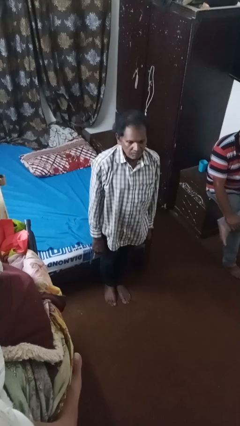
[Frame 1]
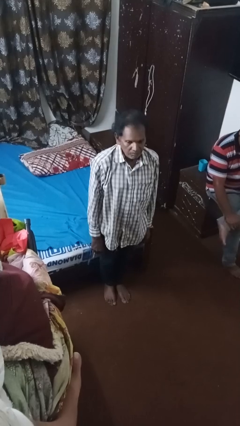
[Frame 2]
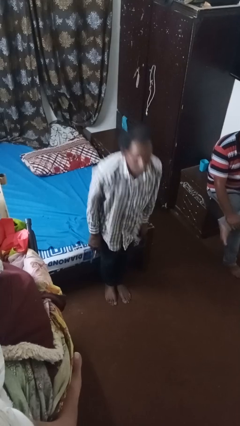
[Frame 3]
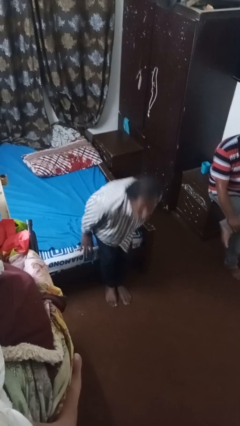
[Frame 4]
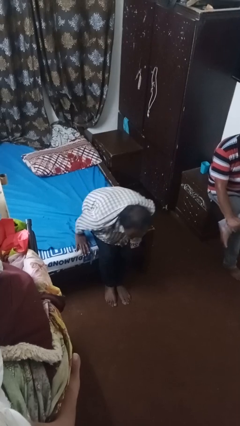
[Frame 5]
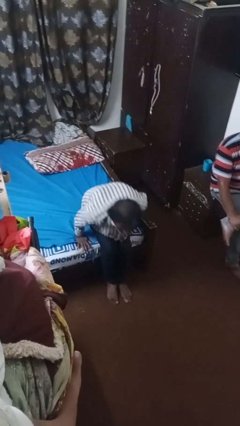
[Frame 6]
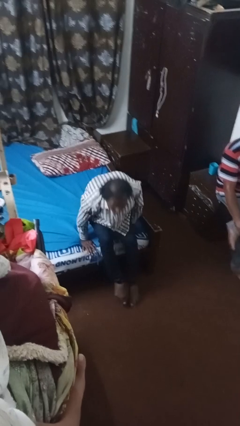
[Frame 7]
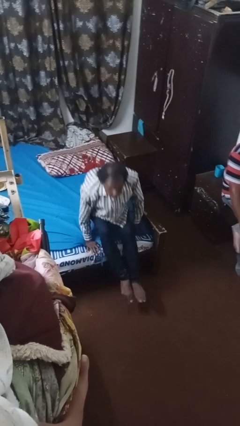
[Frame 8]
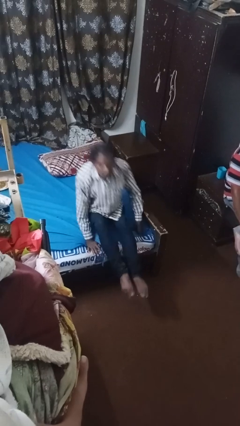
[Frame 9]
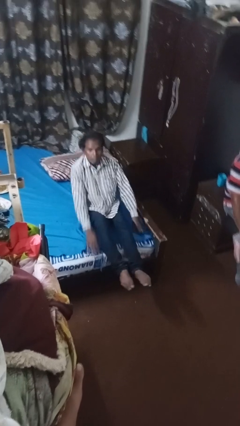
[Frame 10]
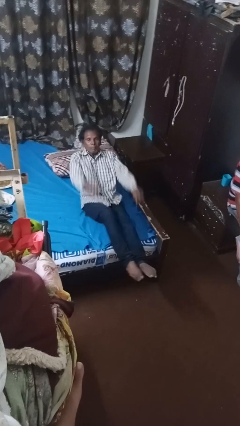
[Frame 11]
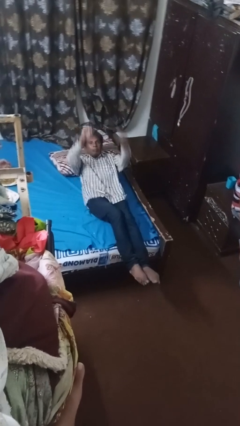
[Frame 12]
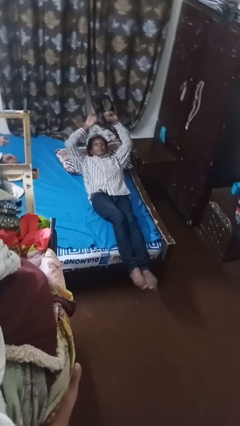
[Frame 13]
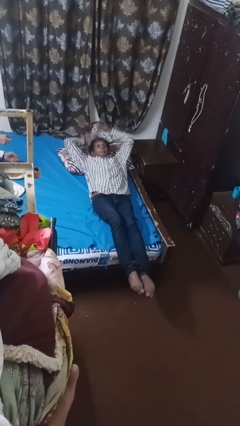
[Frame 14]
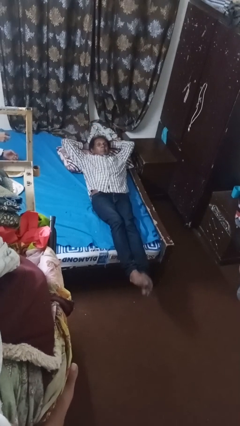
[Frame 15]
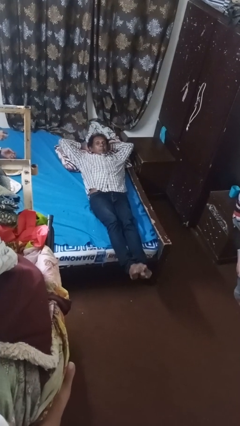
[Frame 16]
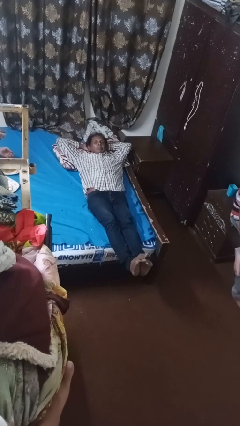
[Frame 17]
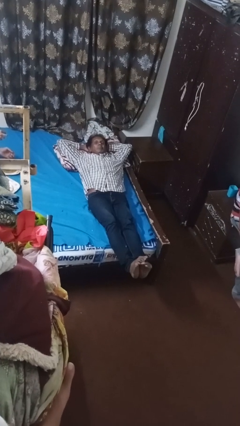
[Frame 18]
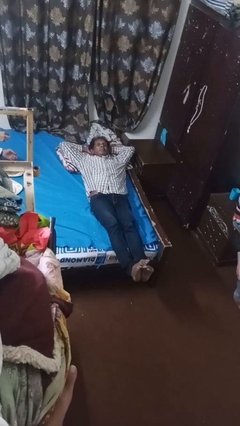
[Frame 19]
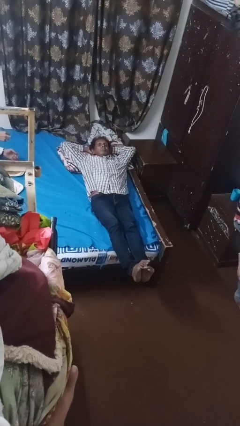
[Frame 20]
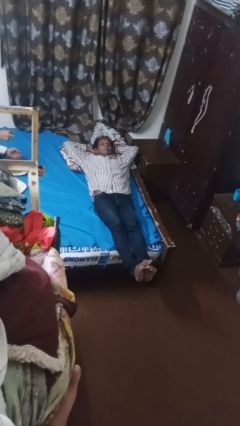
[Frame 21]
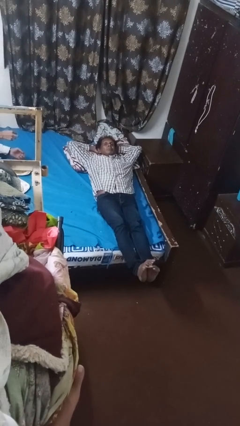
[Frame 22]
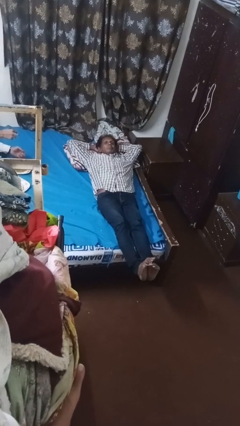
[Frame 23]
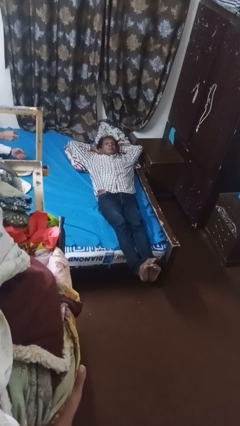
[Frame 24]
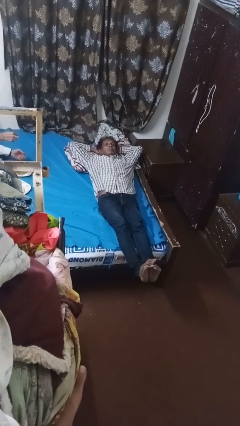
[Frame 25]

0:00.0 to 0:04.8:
person lies down on bed

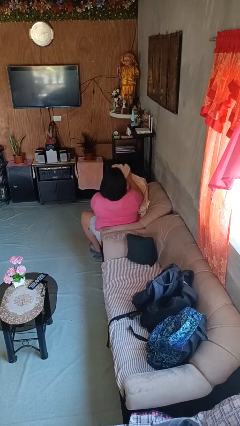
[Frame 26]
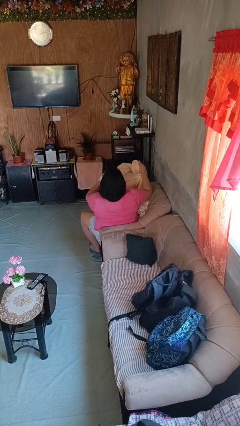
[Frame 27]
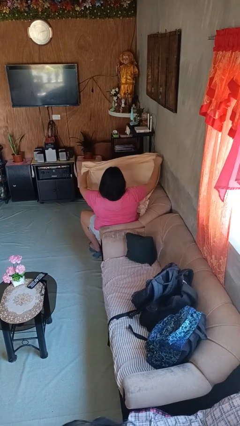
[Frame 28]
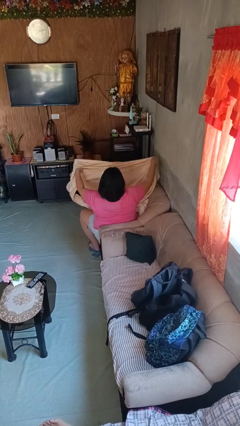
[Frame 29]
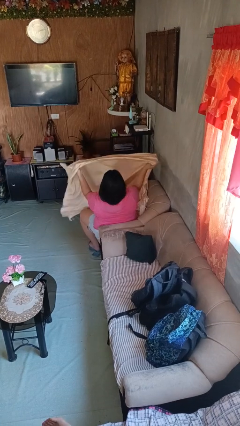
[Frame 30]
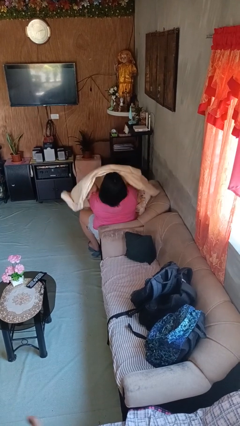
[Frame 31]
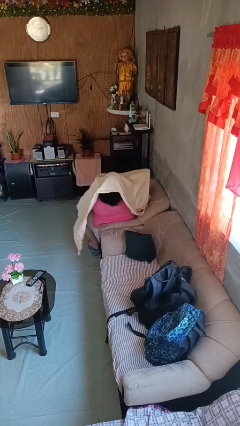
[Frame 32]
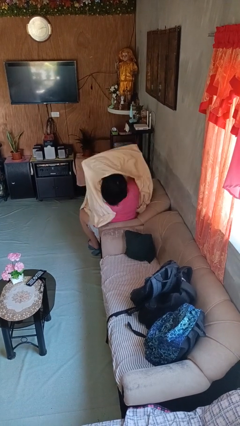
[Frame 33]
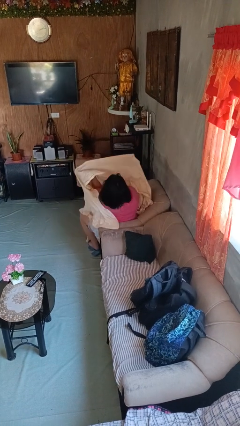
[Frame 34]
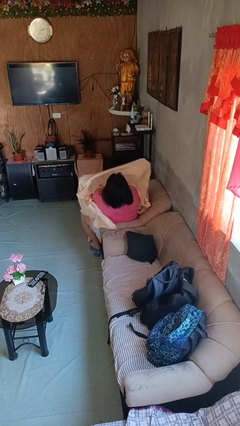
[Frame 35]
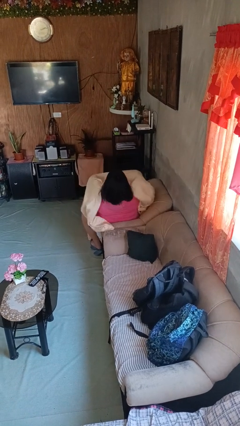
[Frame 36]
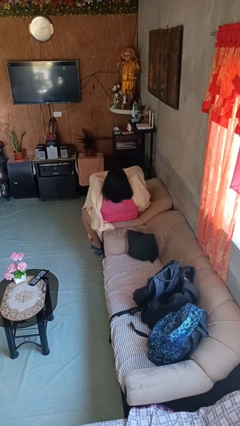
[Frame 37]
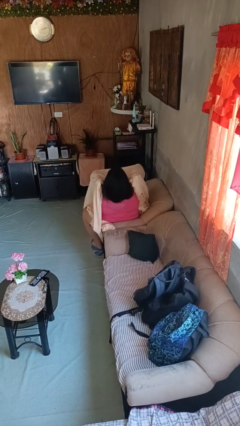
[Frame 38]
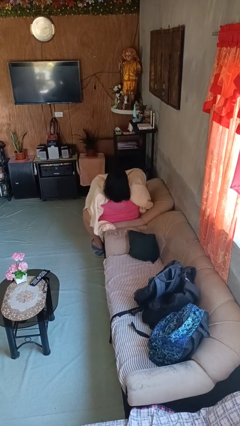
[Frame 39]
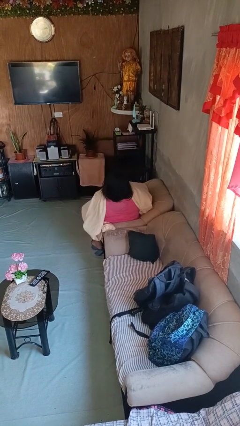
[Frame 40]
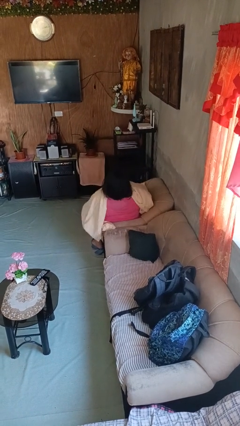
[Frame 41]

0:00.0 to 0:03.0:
person covers with blanket

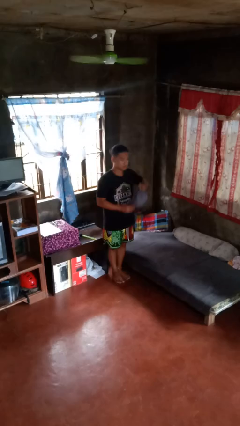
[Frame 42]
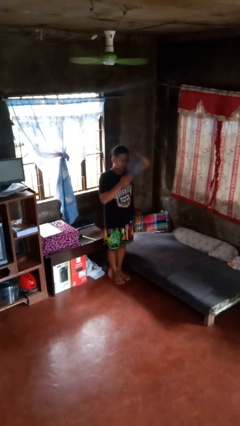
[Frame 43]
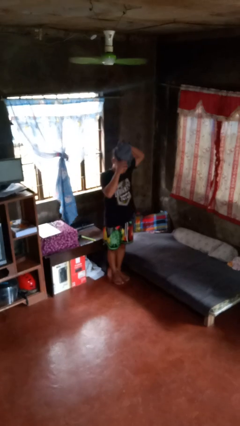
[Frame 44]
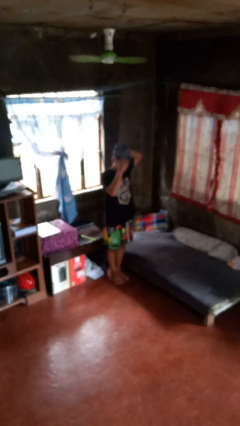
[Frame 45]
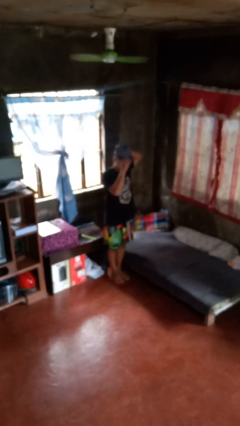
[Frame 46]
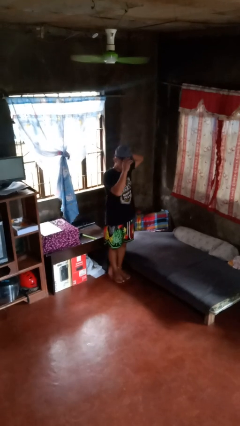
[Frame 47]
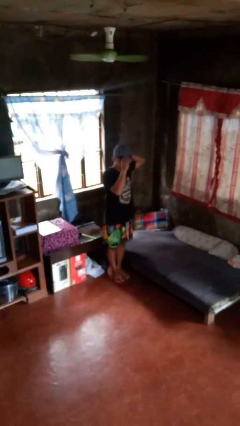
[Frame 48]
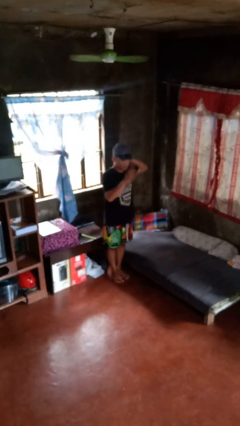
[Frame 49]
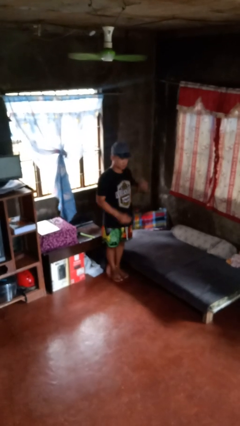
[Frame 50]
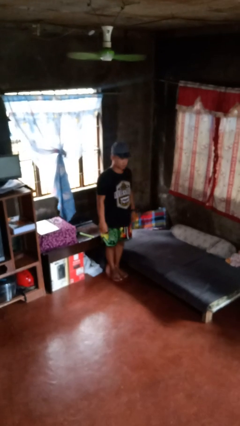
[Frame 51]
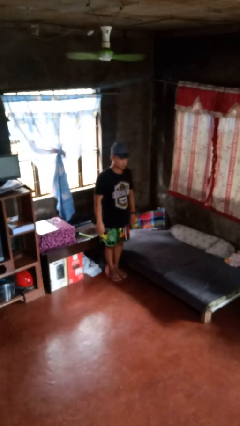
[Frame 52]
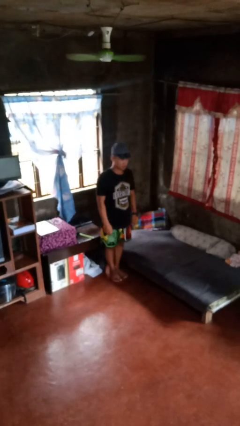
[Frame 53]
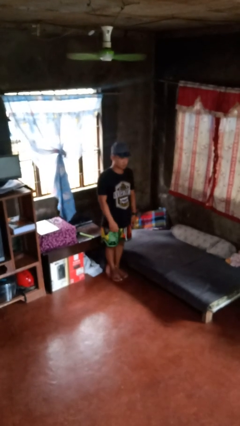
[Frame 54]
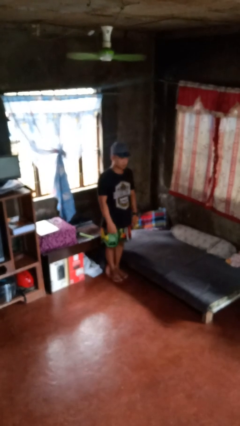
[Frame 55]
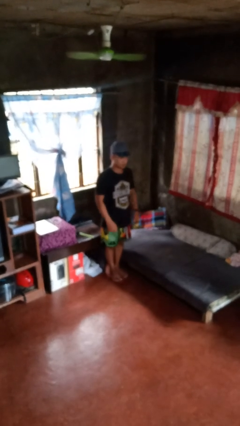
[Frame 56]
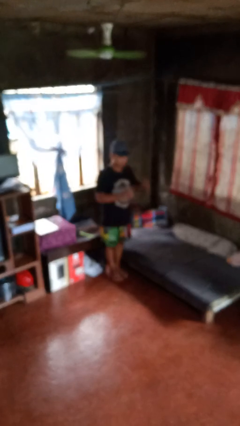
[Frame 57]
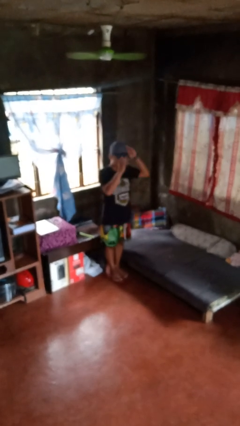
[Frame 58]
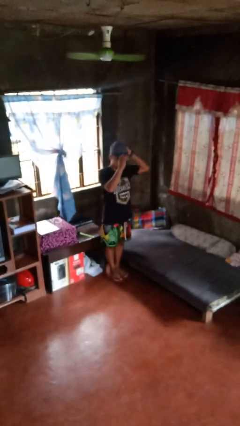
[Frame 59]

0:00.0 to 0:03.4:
person puts on hat

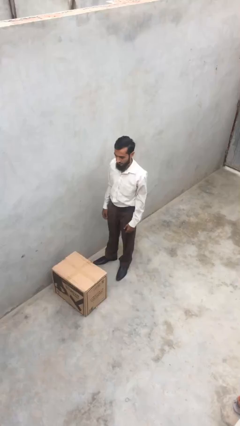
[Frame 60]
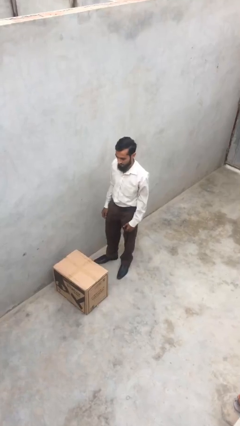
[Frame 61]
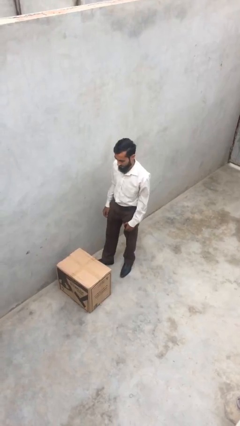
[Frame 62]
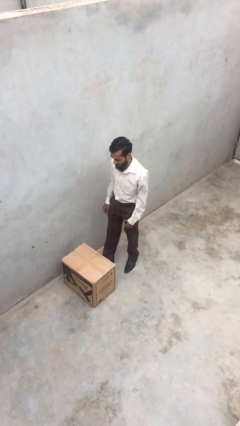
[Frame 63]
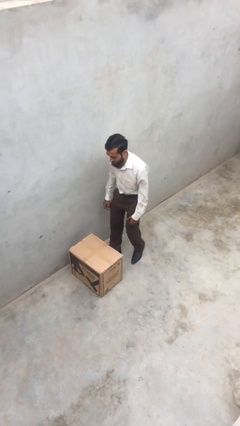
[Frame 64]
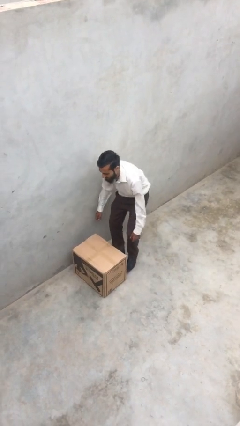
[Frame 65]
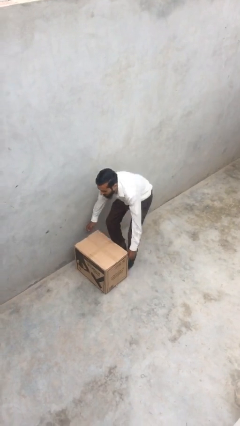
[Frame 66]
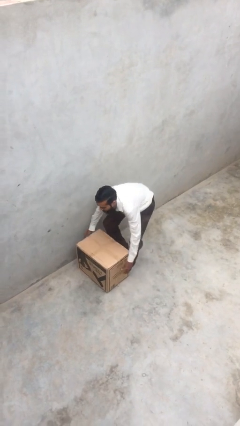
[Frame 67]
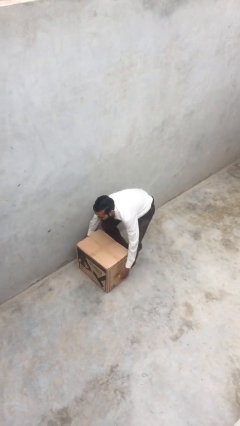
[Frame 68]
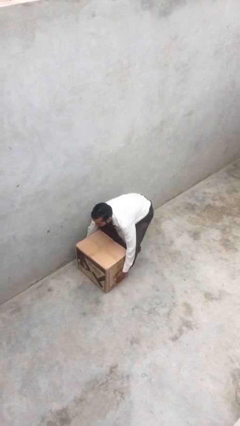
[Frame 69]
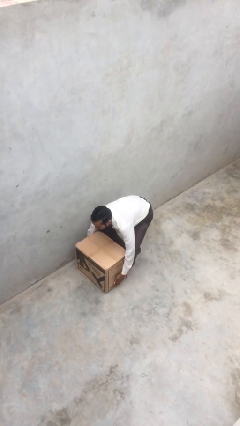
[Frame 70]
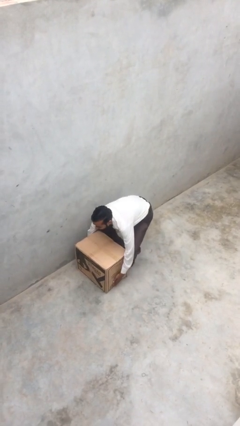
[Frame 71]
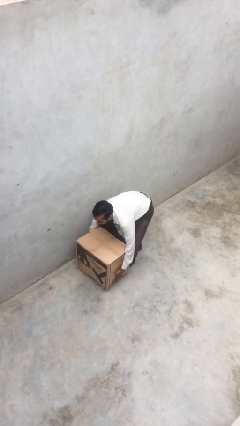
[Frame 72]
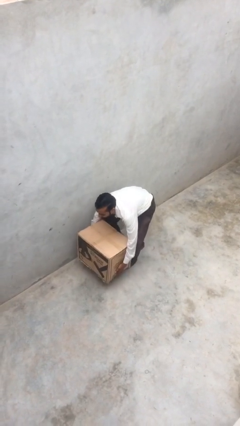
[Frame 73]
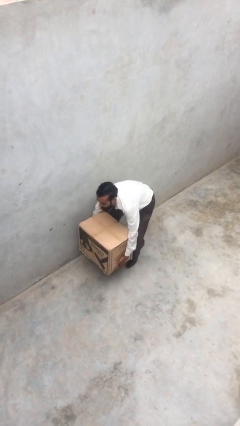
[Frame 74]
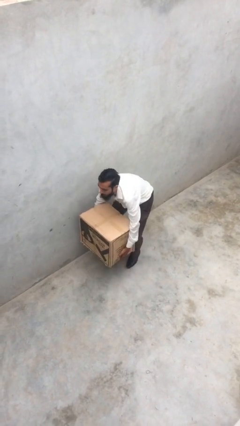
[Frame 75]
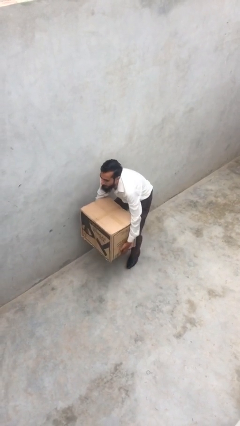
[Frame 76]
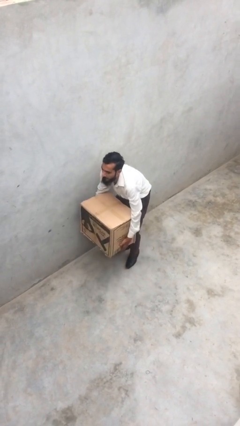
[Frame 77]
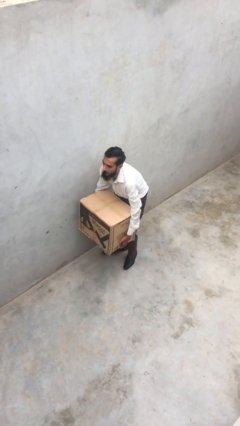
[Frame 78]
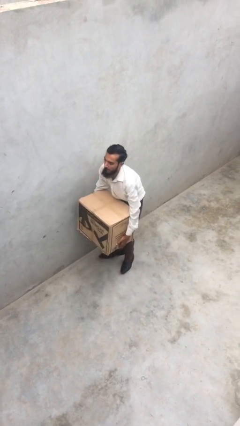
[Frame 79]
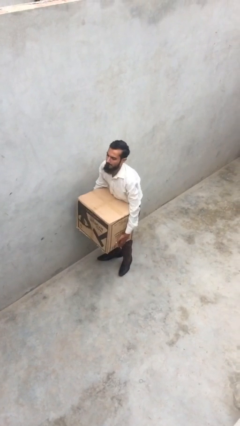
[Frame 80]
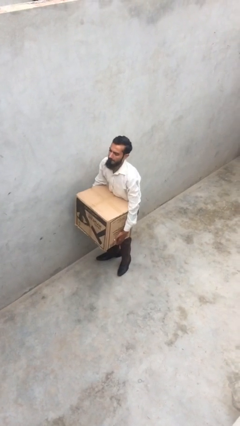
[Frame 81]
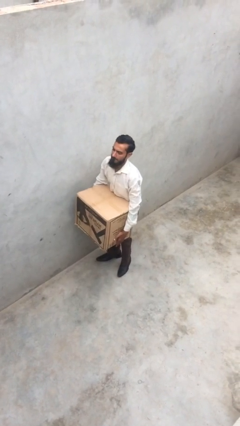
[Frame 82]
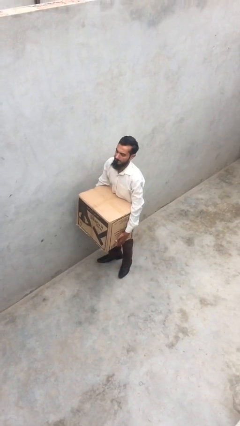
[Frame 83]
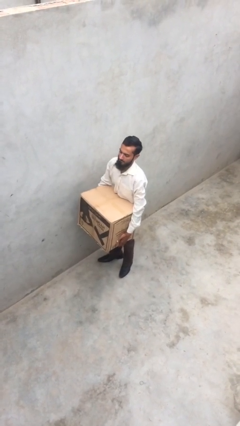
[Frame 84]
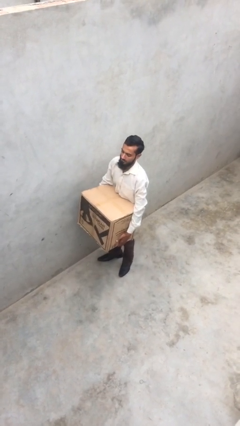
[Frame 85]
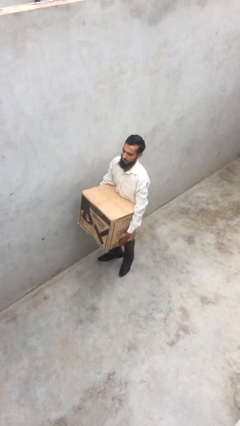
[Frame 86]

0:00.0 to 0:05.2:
person picks up object from floor

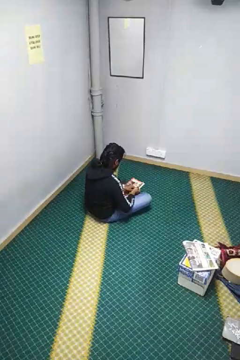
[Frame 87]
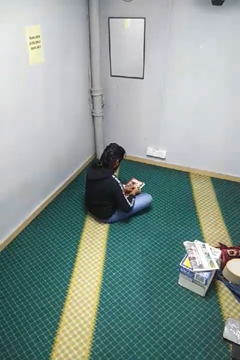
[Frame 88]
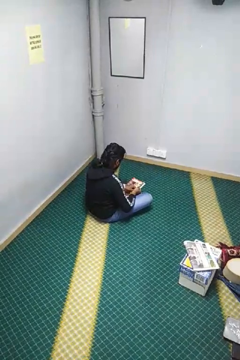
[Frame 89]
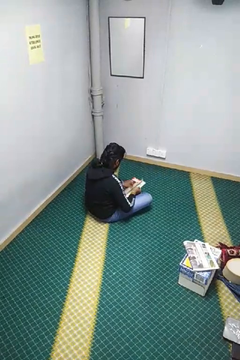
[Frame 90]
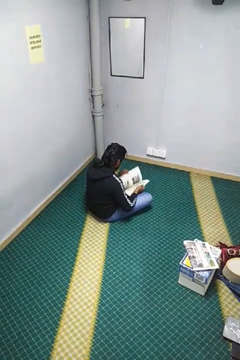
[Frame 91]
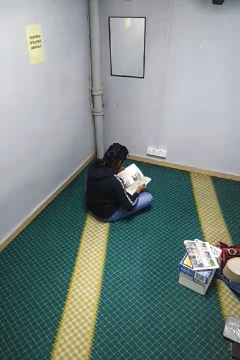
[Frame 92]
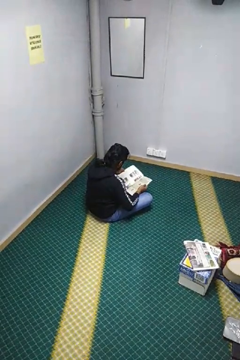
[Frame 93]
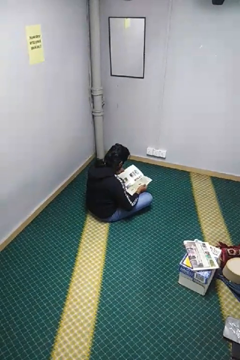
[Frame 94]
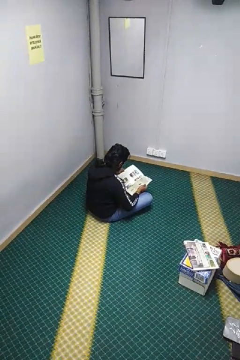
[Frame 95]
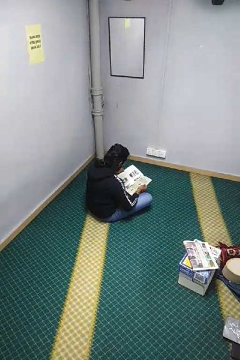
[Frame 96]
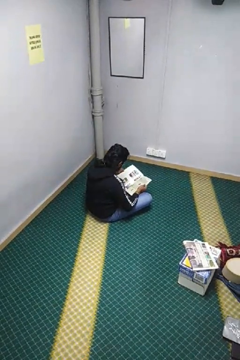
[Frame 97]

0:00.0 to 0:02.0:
person reads magazine
